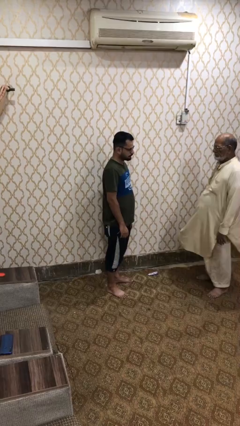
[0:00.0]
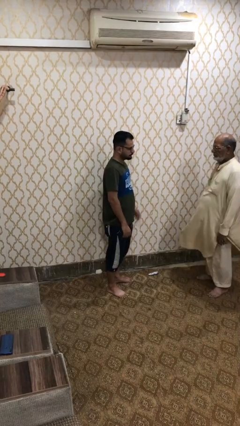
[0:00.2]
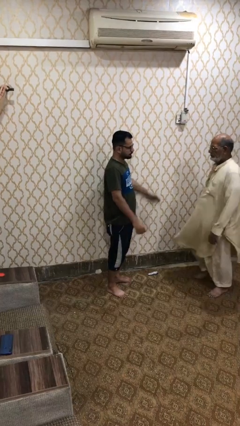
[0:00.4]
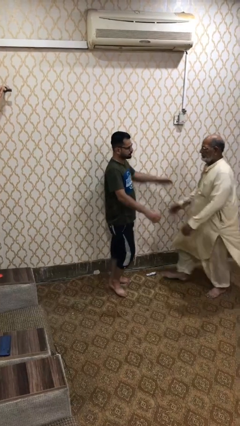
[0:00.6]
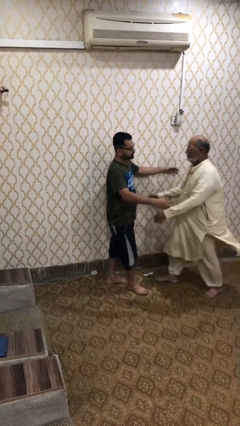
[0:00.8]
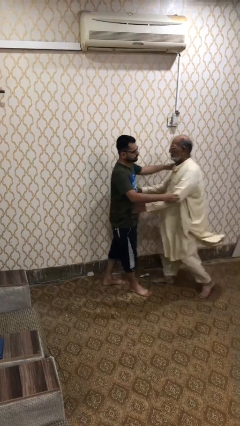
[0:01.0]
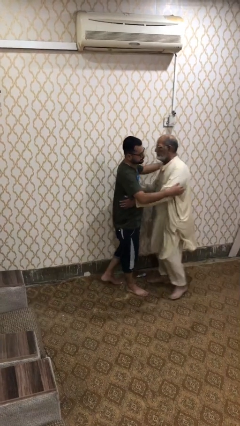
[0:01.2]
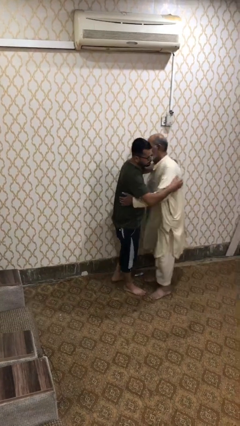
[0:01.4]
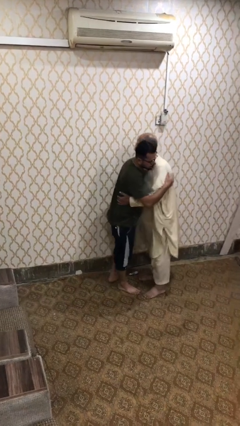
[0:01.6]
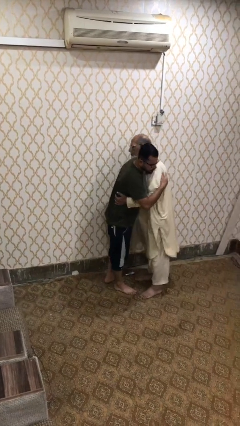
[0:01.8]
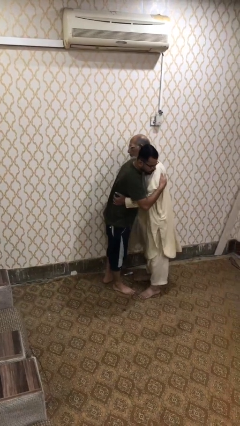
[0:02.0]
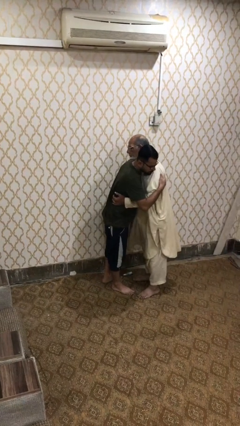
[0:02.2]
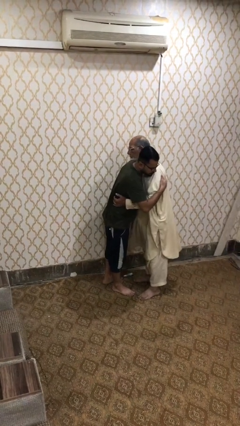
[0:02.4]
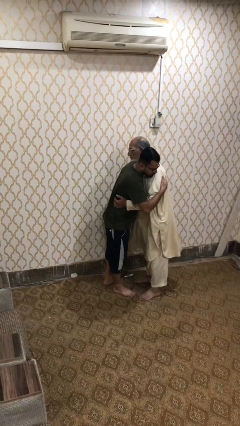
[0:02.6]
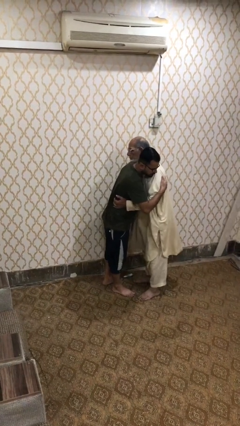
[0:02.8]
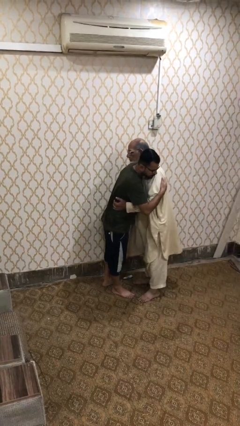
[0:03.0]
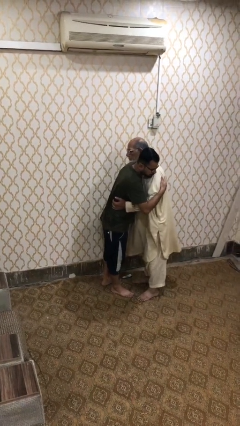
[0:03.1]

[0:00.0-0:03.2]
person embraces person

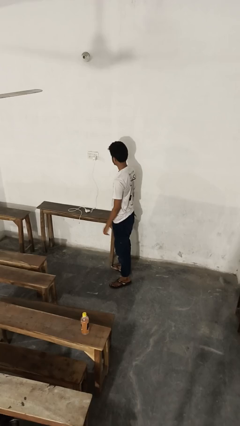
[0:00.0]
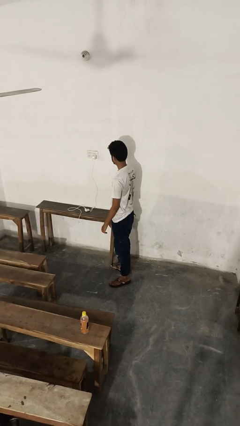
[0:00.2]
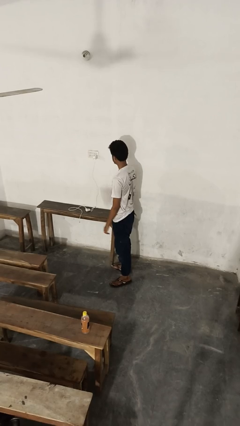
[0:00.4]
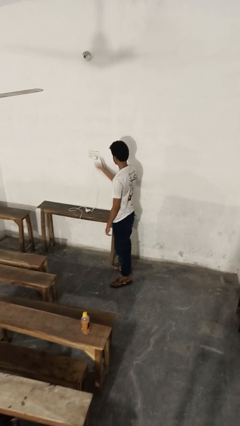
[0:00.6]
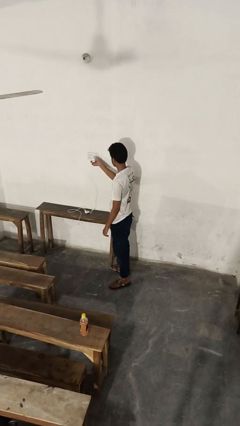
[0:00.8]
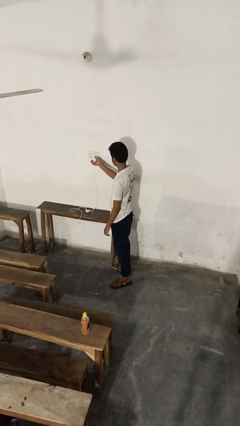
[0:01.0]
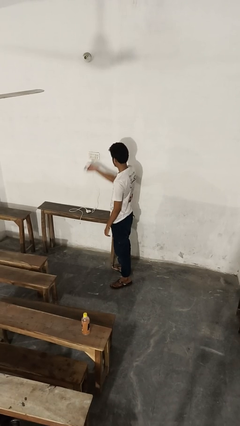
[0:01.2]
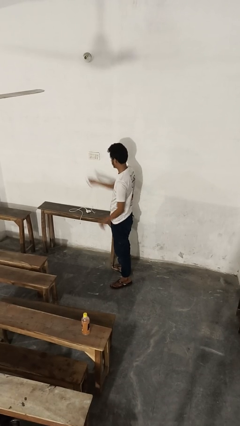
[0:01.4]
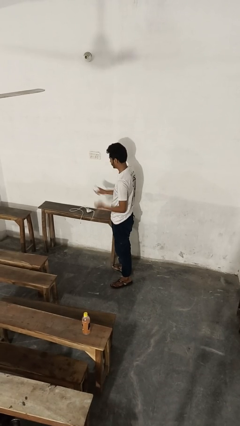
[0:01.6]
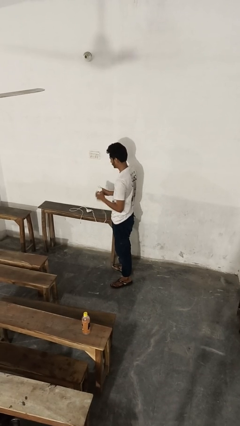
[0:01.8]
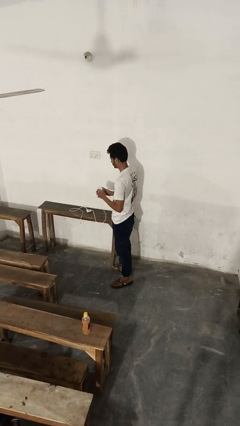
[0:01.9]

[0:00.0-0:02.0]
person unplugs from electrical socket

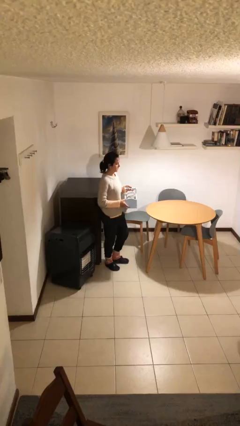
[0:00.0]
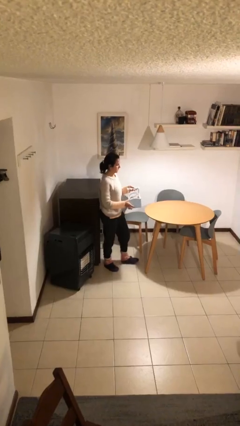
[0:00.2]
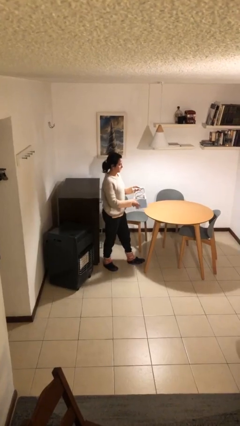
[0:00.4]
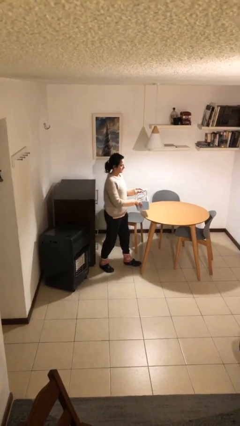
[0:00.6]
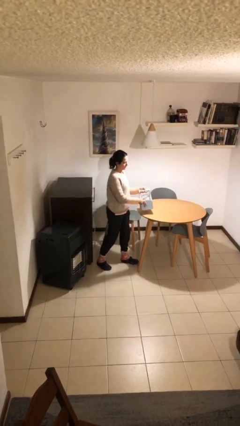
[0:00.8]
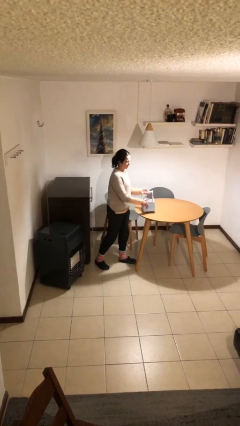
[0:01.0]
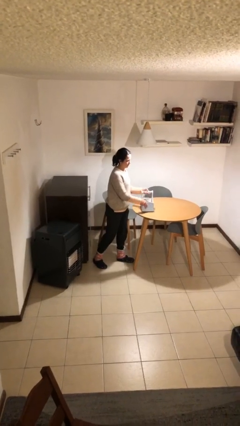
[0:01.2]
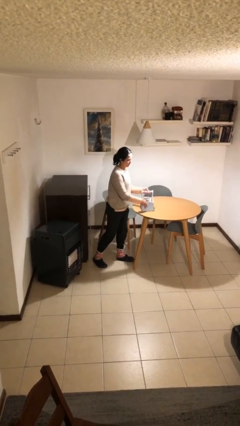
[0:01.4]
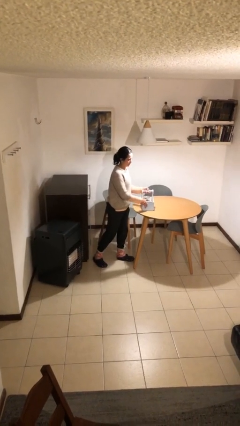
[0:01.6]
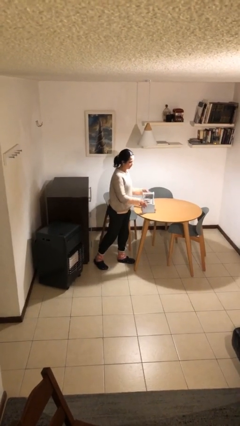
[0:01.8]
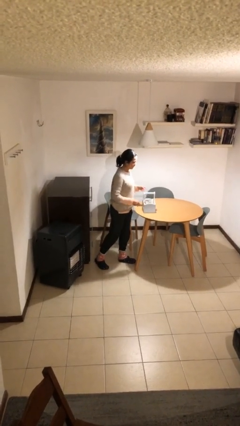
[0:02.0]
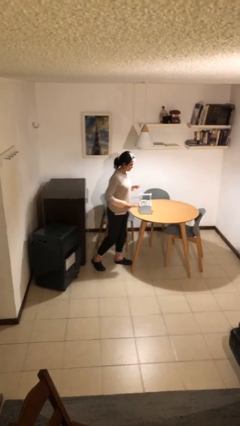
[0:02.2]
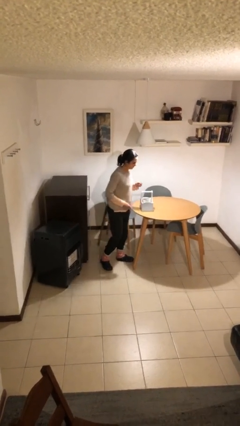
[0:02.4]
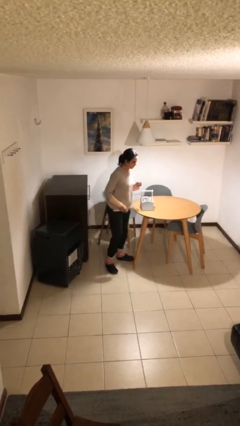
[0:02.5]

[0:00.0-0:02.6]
person puts down object on table

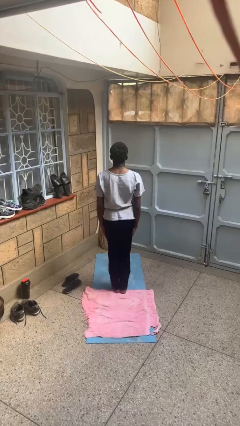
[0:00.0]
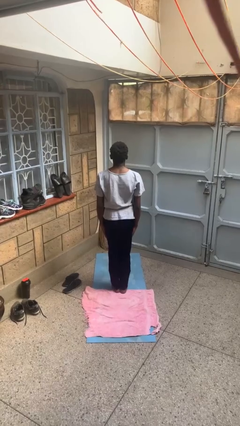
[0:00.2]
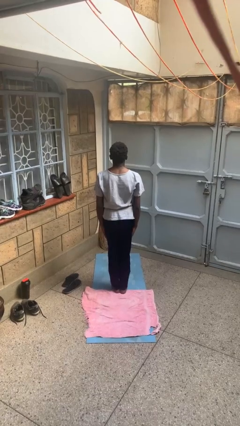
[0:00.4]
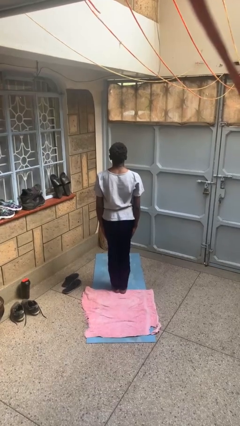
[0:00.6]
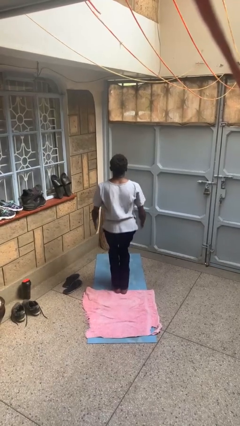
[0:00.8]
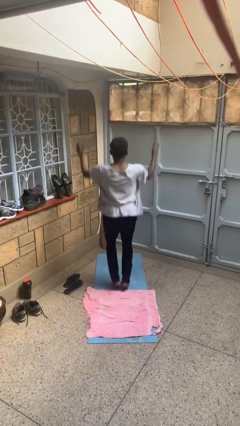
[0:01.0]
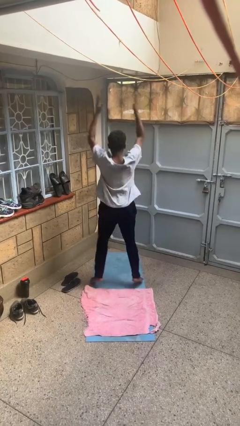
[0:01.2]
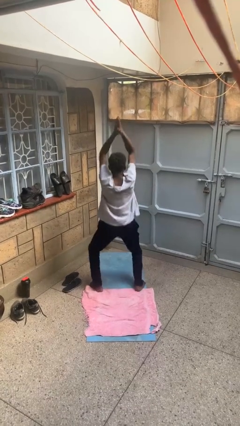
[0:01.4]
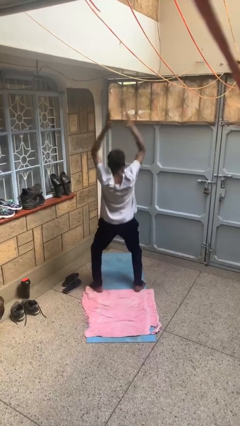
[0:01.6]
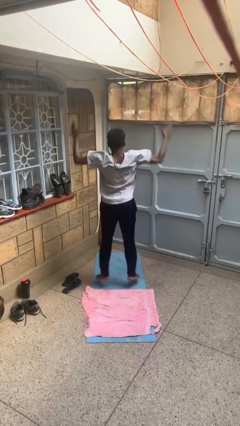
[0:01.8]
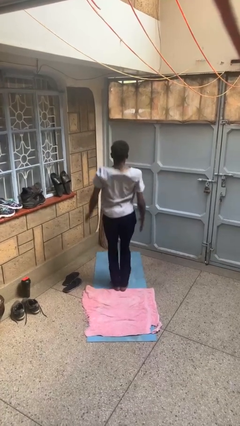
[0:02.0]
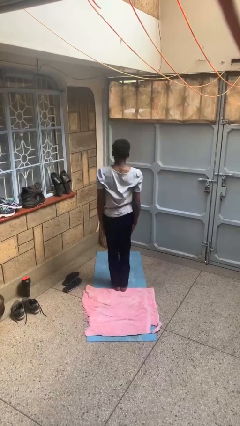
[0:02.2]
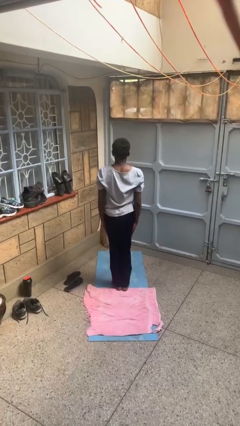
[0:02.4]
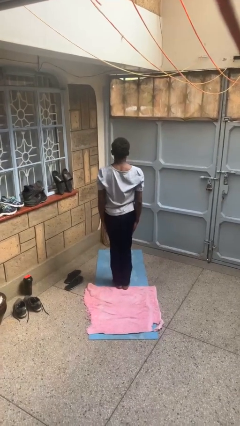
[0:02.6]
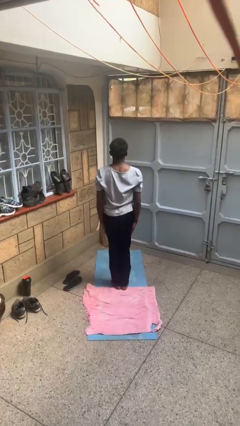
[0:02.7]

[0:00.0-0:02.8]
person exercises with jumping jacks

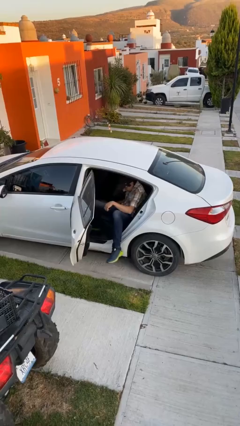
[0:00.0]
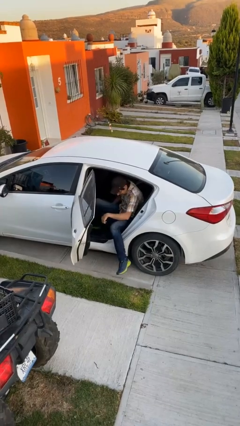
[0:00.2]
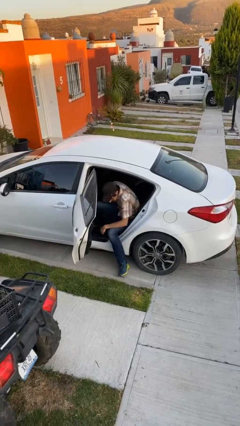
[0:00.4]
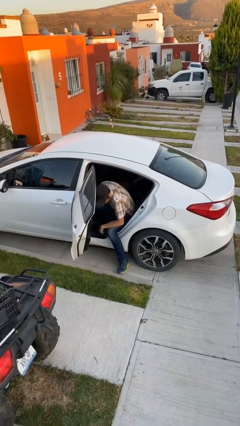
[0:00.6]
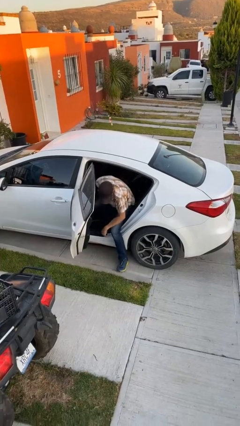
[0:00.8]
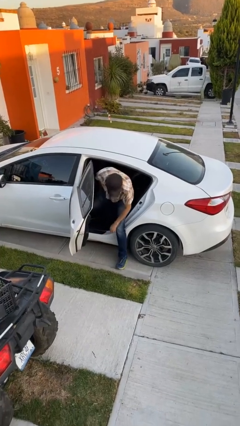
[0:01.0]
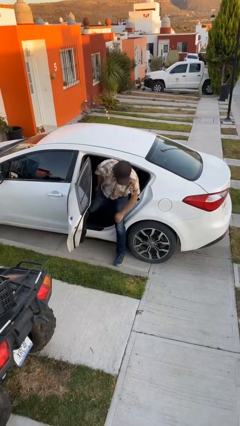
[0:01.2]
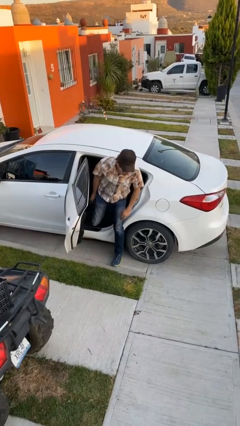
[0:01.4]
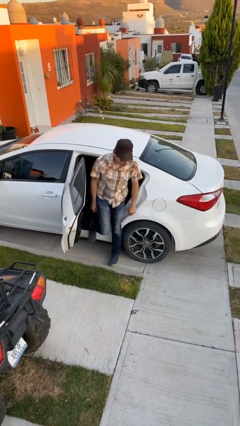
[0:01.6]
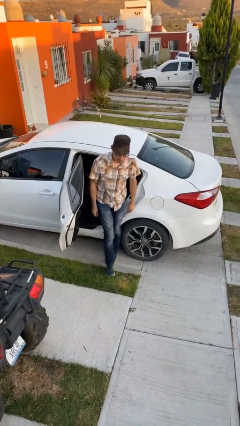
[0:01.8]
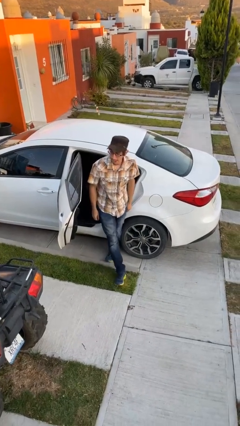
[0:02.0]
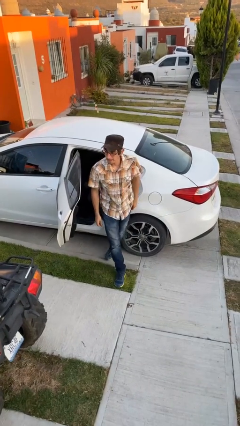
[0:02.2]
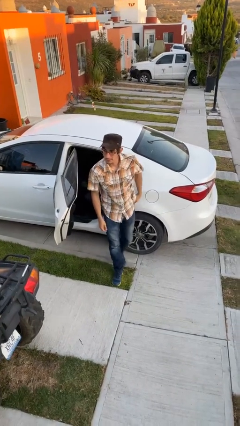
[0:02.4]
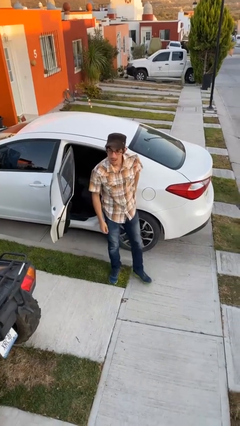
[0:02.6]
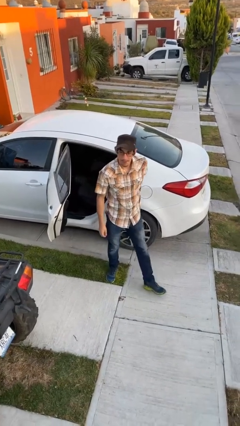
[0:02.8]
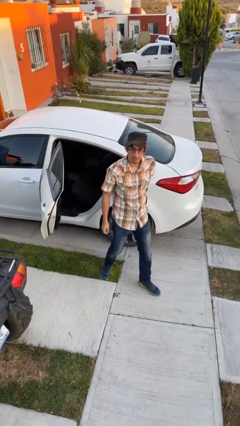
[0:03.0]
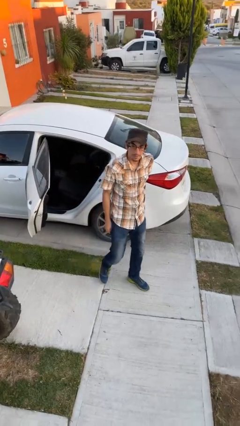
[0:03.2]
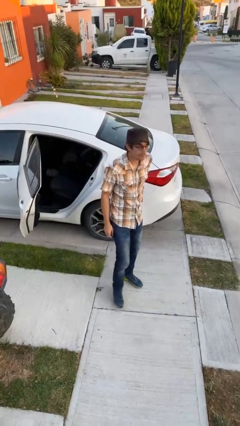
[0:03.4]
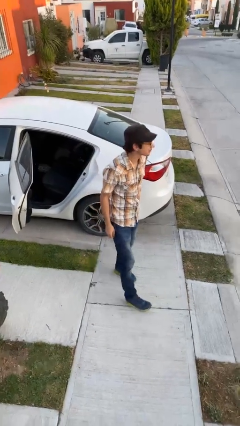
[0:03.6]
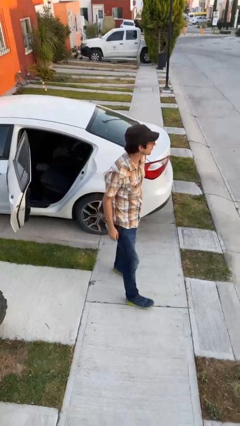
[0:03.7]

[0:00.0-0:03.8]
person exits car

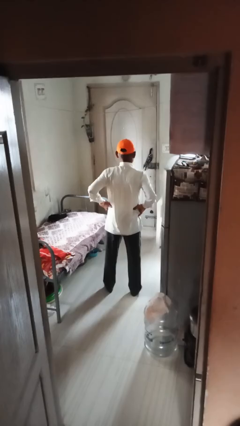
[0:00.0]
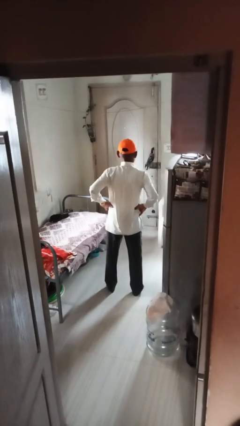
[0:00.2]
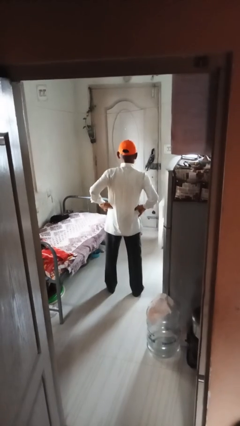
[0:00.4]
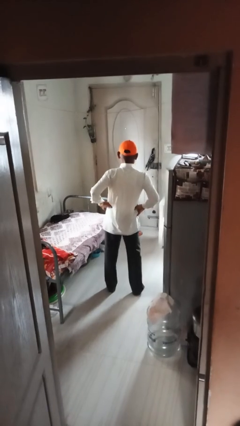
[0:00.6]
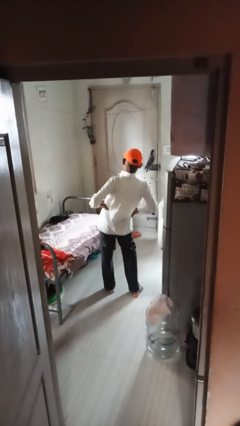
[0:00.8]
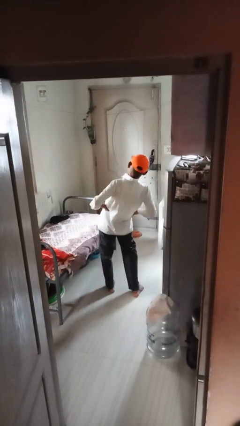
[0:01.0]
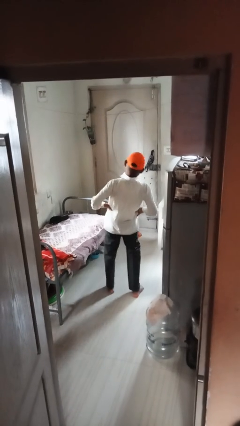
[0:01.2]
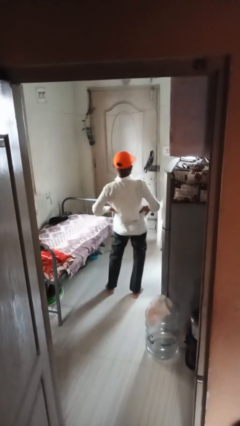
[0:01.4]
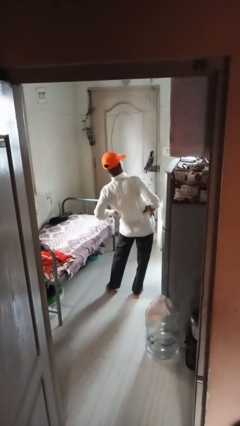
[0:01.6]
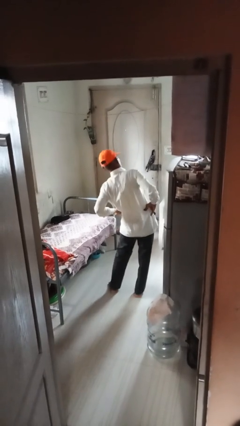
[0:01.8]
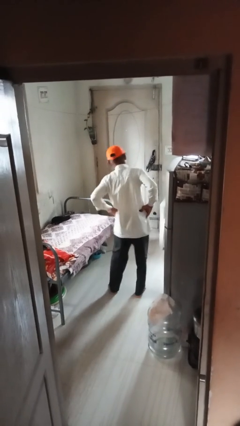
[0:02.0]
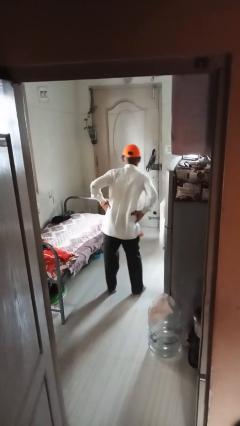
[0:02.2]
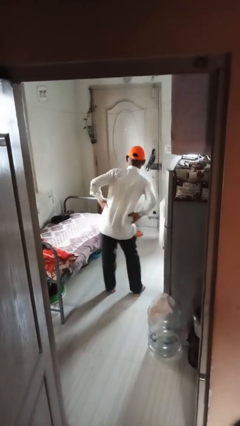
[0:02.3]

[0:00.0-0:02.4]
person wiggles hips
